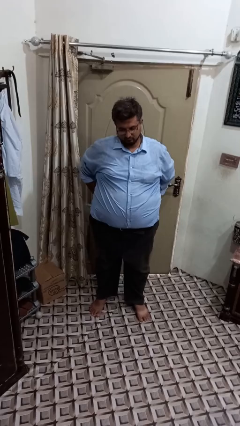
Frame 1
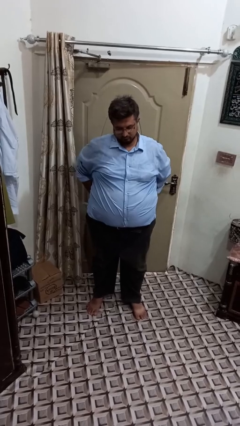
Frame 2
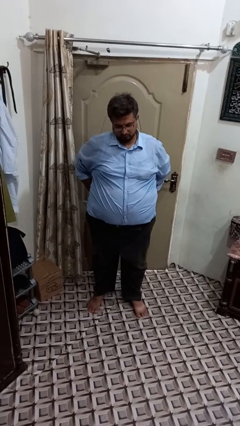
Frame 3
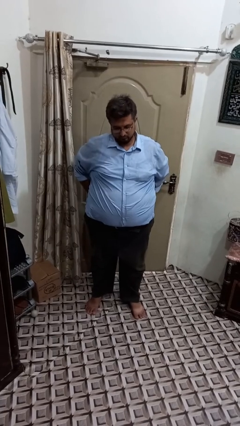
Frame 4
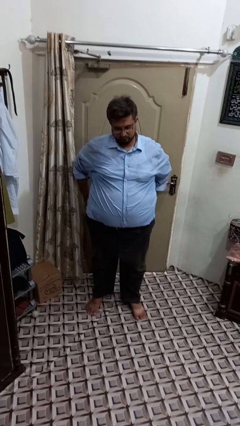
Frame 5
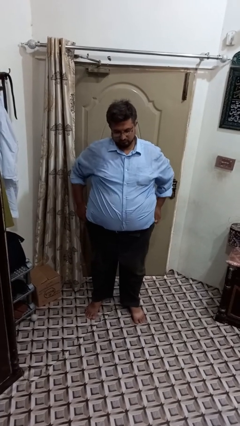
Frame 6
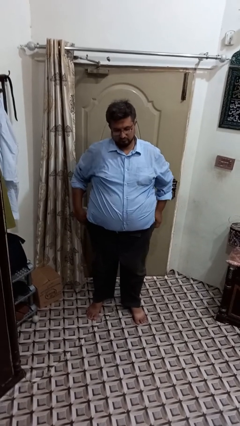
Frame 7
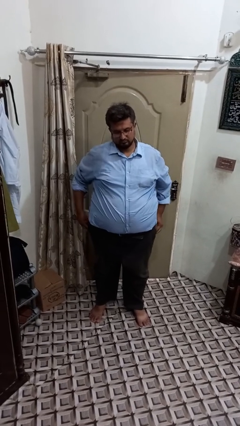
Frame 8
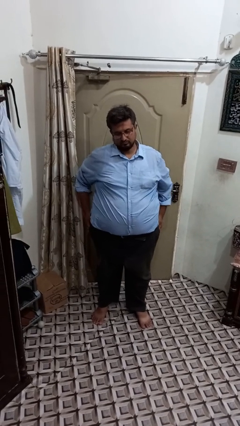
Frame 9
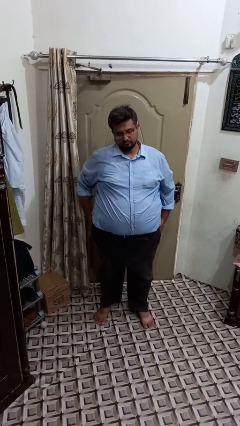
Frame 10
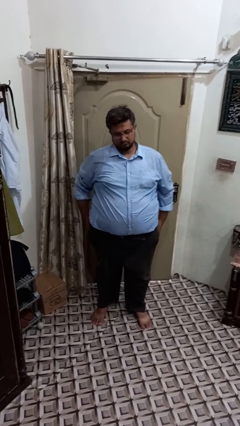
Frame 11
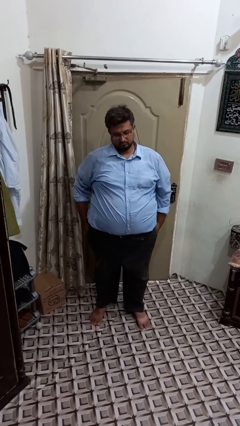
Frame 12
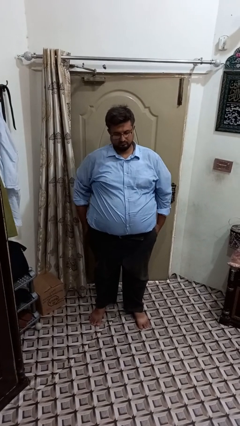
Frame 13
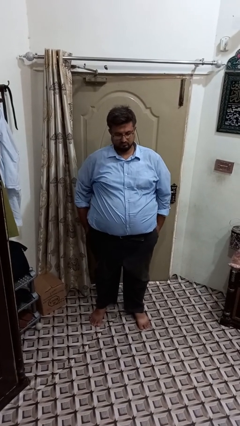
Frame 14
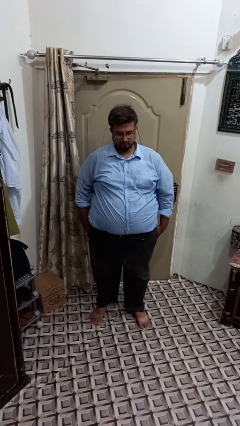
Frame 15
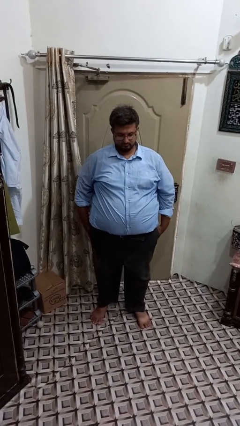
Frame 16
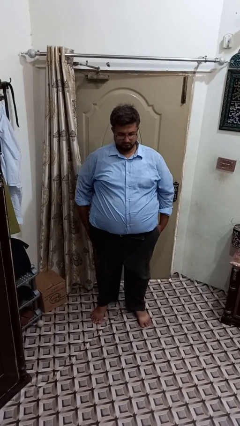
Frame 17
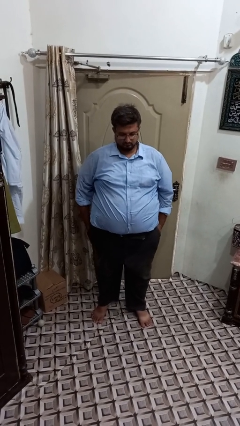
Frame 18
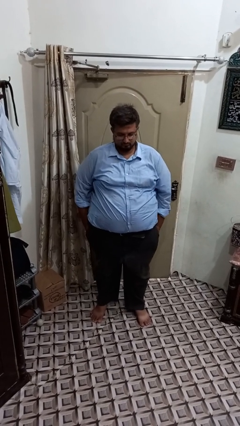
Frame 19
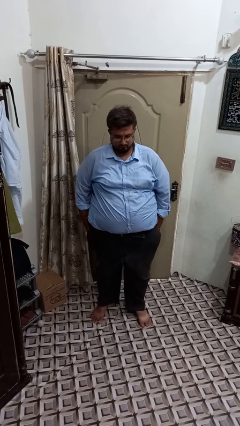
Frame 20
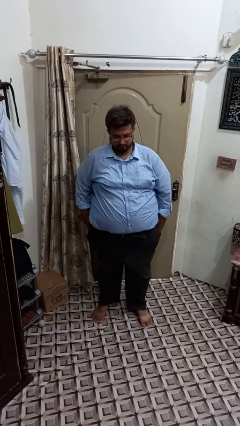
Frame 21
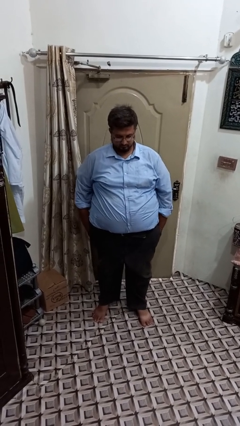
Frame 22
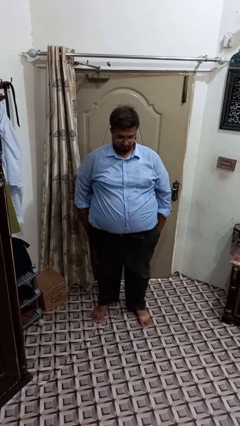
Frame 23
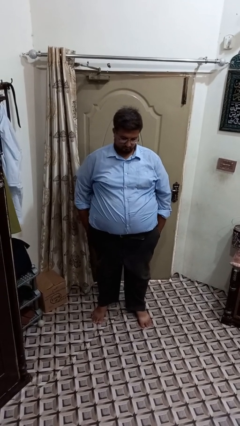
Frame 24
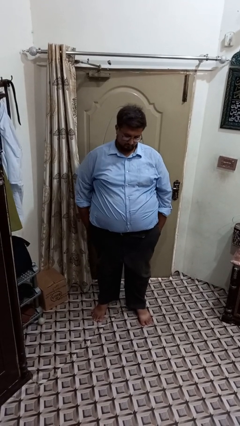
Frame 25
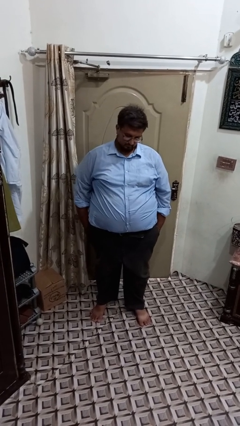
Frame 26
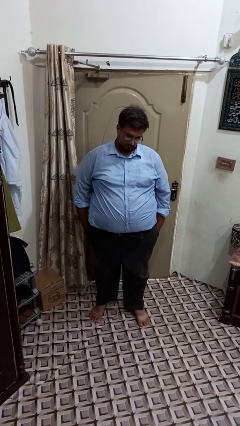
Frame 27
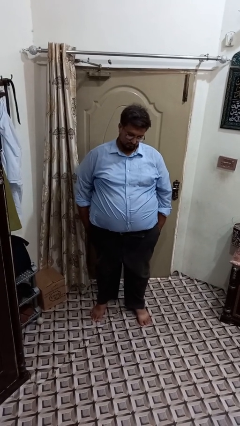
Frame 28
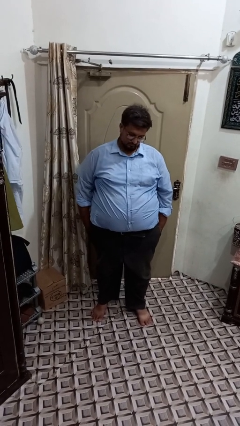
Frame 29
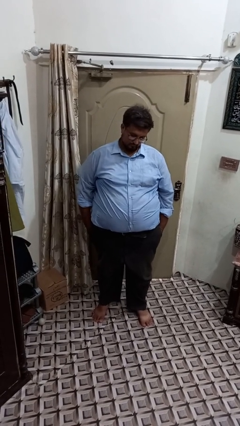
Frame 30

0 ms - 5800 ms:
person puts hands in back pockets

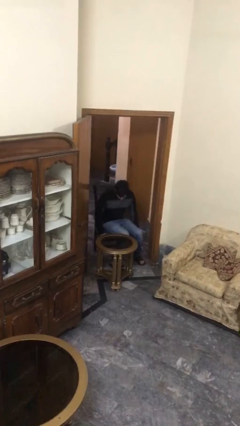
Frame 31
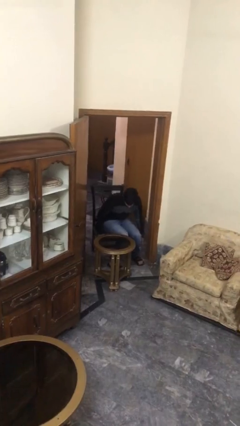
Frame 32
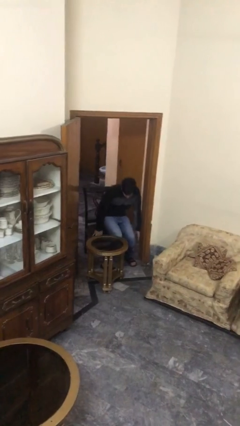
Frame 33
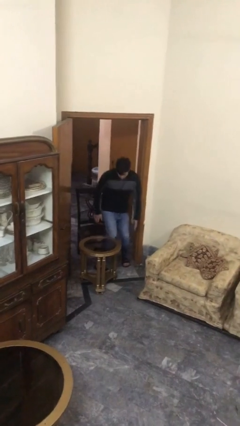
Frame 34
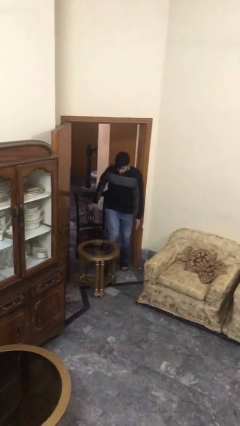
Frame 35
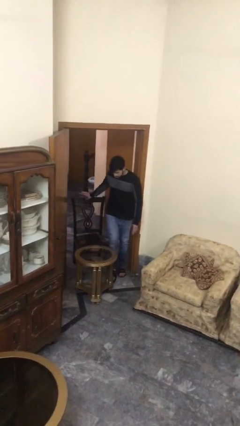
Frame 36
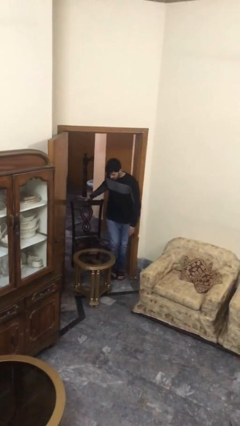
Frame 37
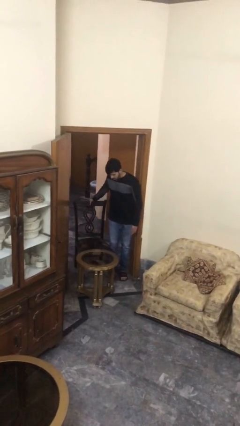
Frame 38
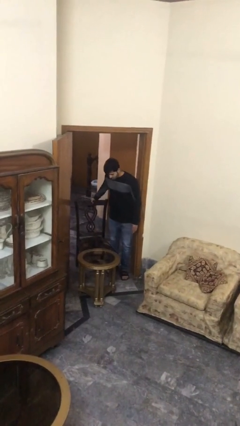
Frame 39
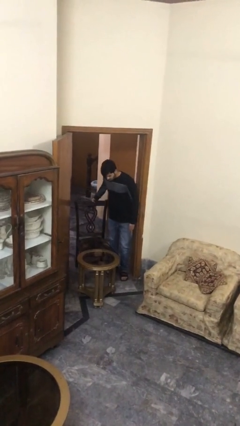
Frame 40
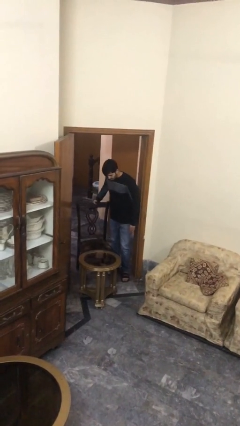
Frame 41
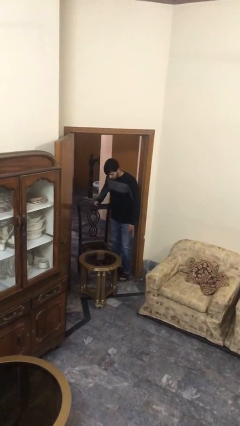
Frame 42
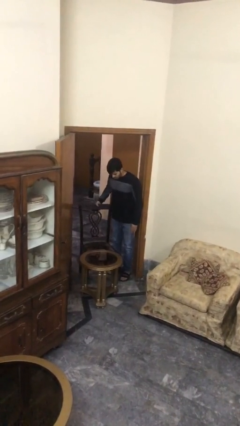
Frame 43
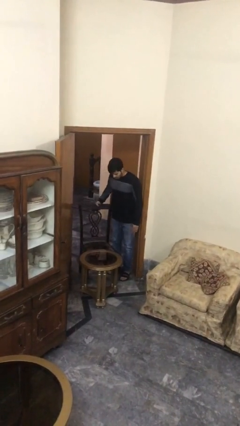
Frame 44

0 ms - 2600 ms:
person stands up

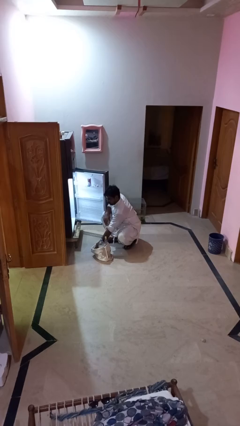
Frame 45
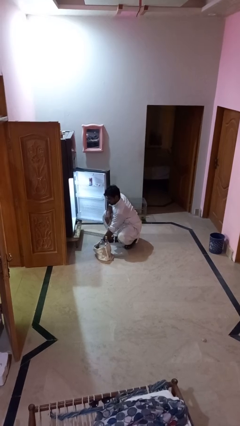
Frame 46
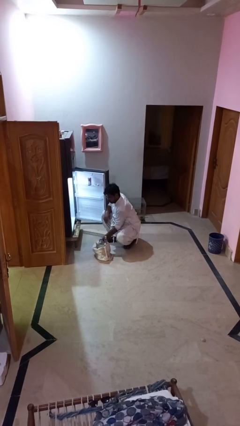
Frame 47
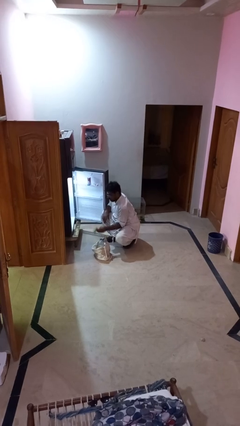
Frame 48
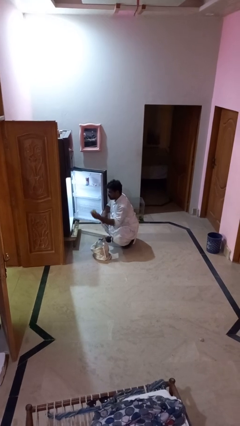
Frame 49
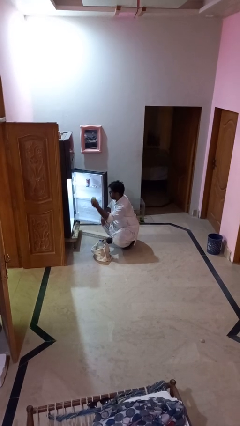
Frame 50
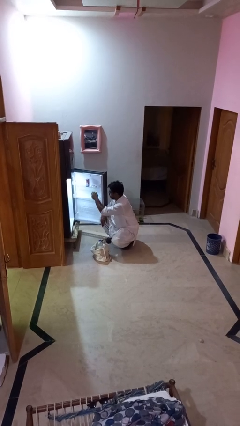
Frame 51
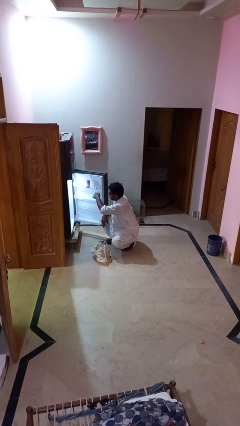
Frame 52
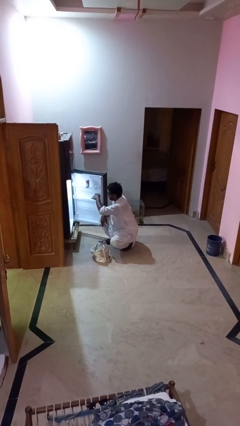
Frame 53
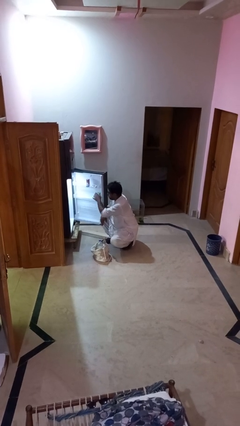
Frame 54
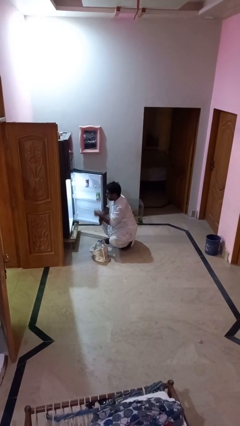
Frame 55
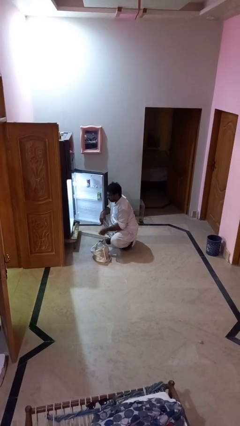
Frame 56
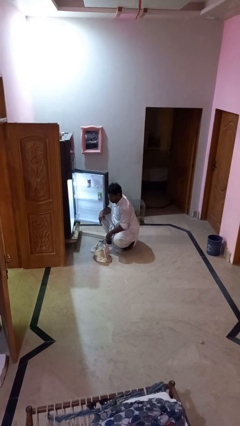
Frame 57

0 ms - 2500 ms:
person loads groceries into refrigerator

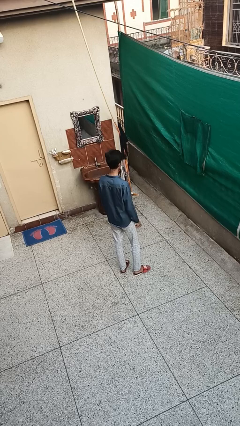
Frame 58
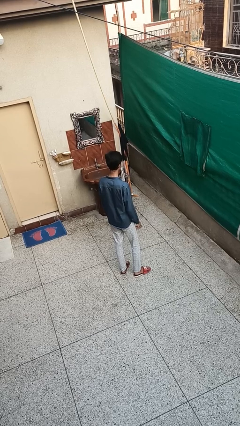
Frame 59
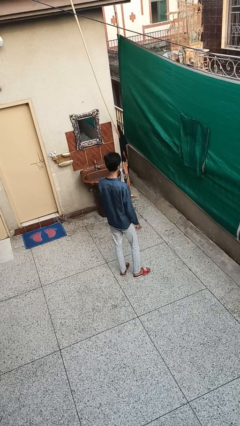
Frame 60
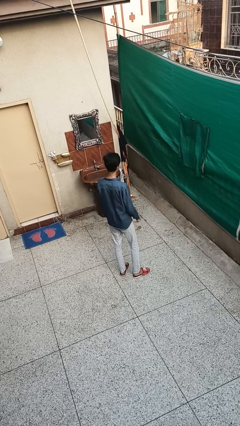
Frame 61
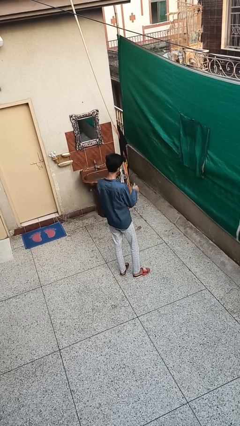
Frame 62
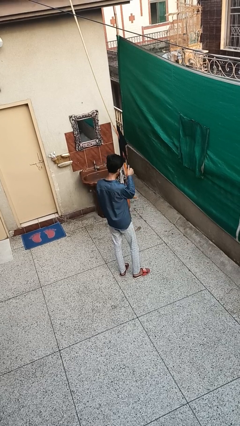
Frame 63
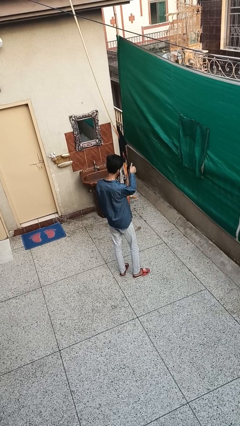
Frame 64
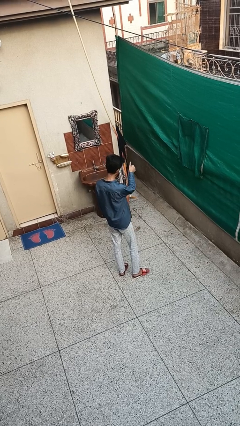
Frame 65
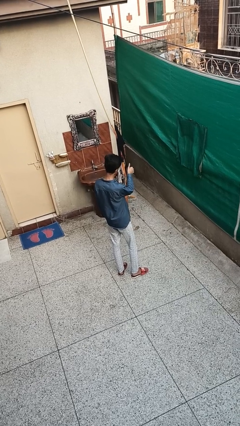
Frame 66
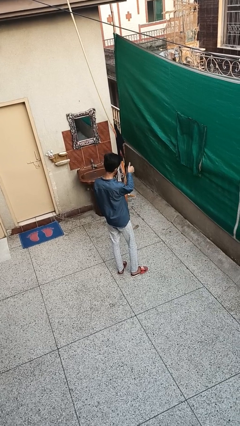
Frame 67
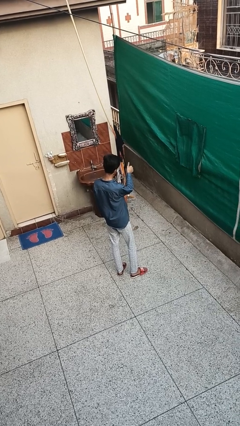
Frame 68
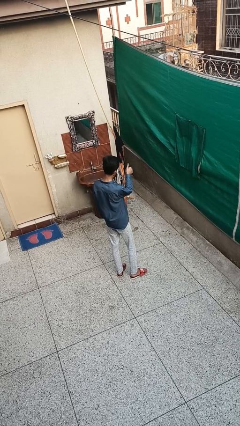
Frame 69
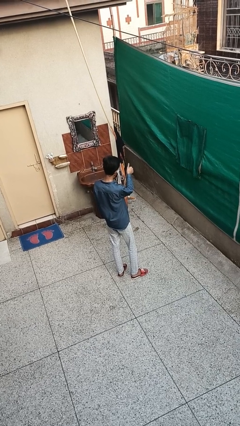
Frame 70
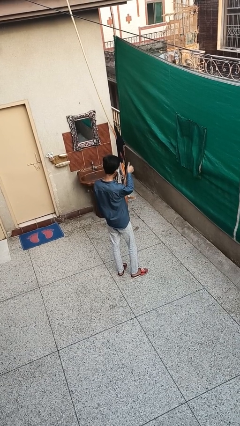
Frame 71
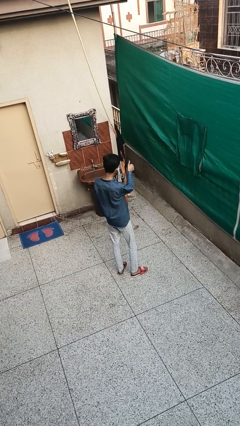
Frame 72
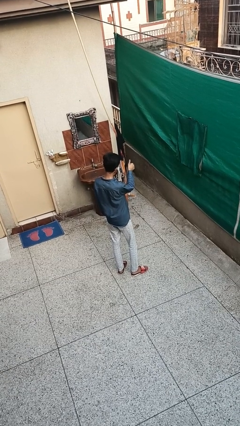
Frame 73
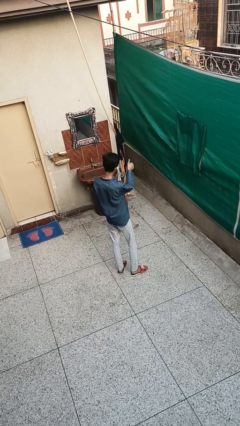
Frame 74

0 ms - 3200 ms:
person gestures thumbs up

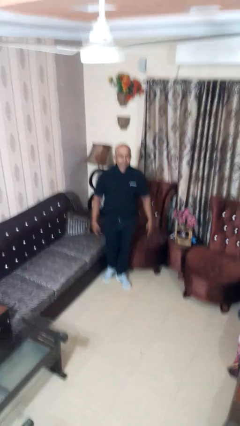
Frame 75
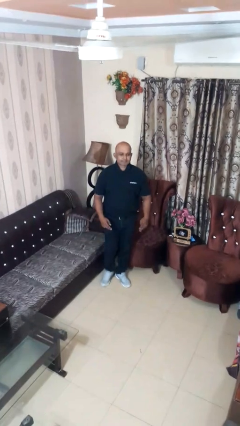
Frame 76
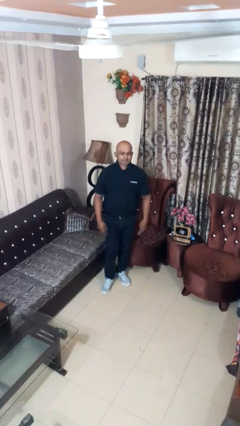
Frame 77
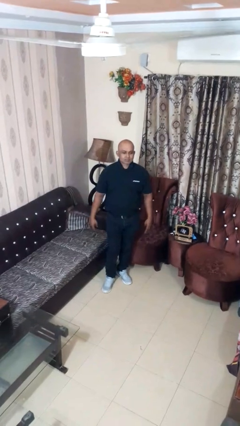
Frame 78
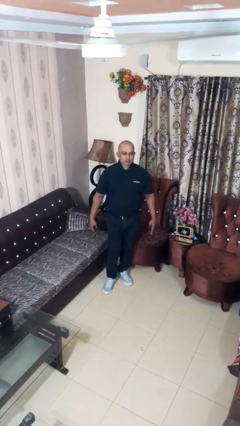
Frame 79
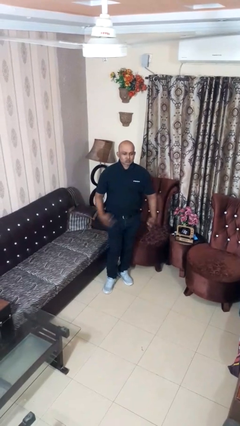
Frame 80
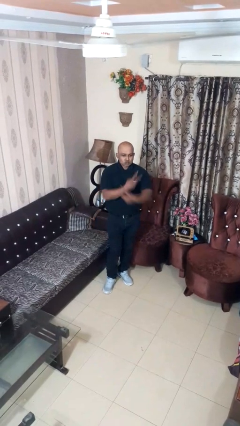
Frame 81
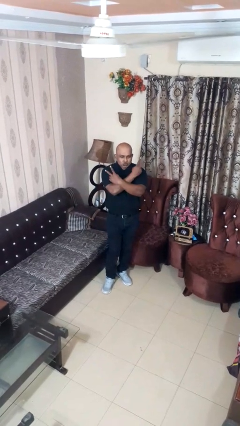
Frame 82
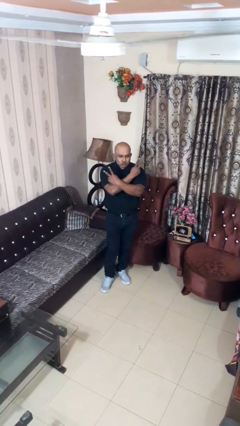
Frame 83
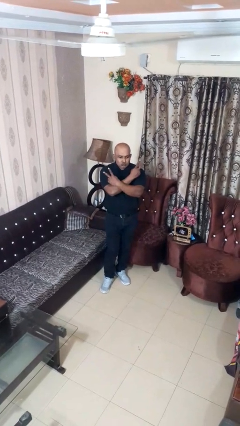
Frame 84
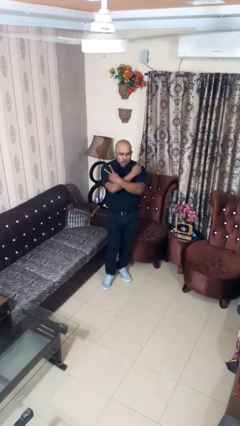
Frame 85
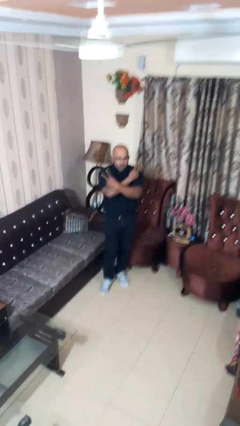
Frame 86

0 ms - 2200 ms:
person gestures arms x

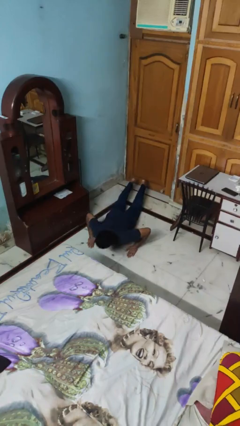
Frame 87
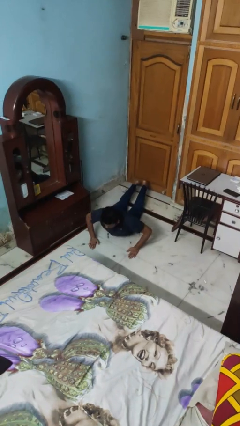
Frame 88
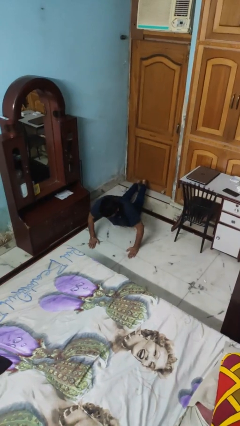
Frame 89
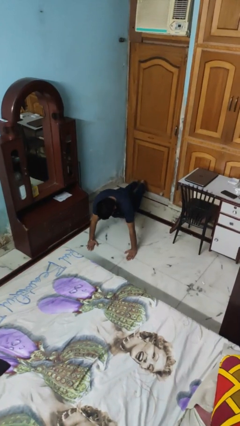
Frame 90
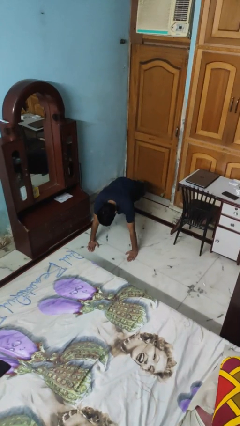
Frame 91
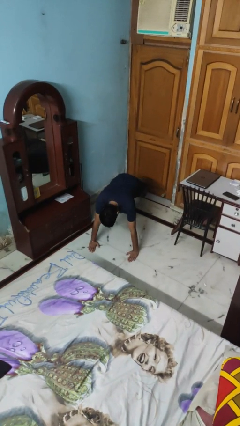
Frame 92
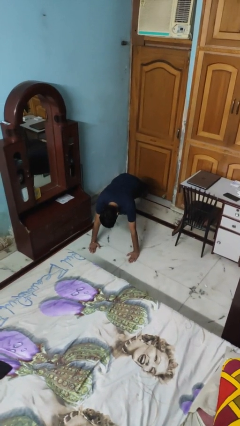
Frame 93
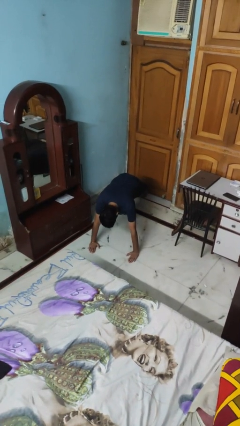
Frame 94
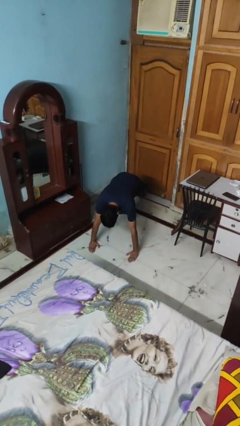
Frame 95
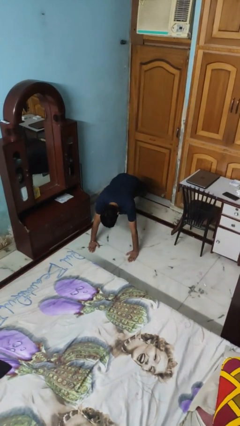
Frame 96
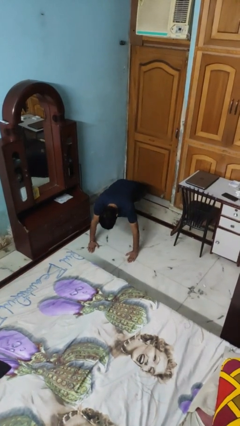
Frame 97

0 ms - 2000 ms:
person exercises with pushup
